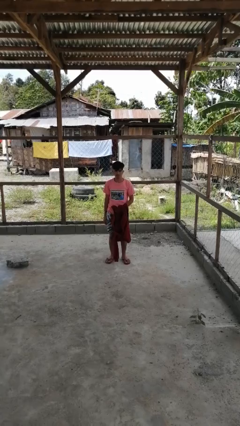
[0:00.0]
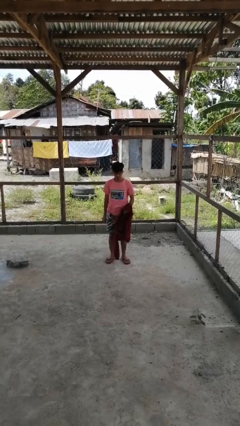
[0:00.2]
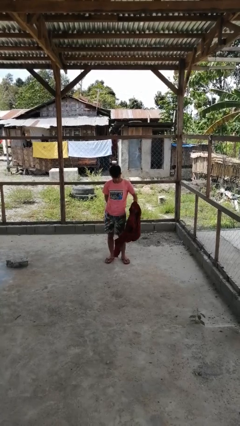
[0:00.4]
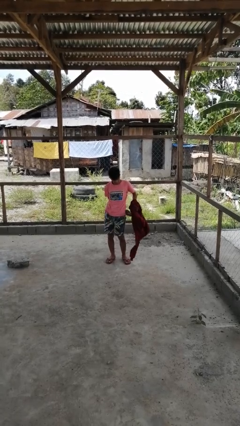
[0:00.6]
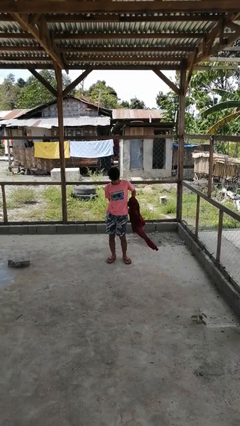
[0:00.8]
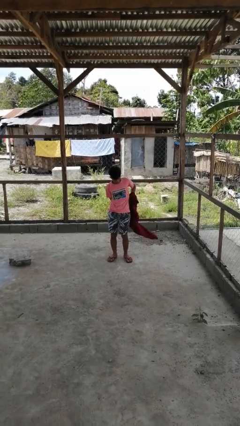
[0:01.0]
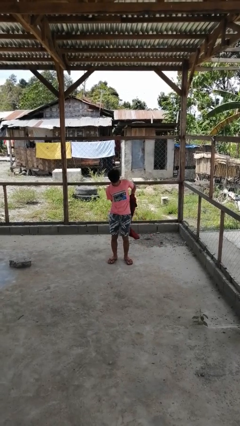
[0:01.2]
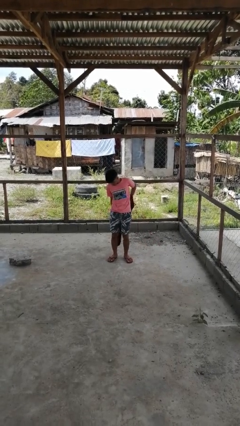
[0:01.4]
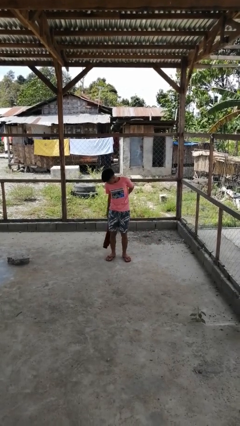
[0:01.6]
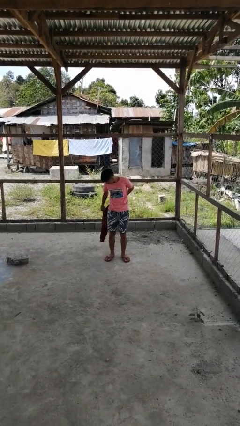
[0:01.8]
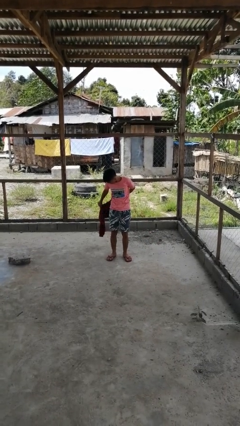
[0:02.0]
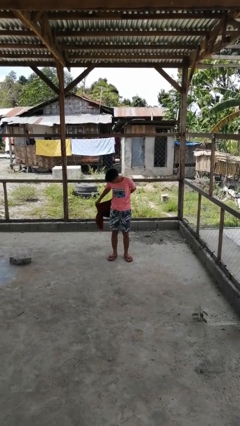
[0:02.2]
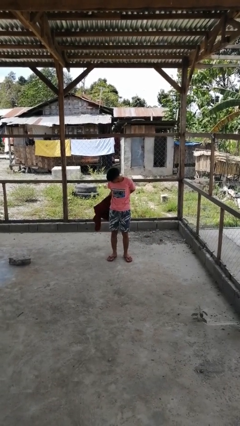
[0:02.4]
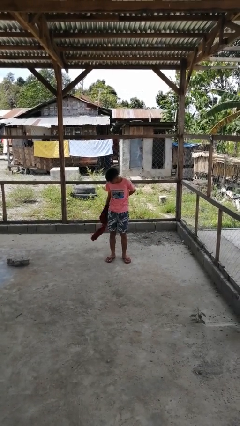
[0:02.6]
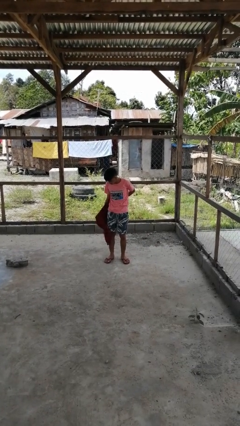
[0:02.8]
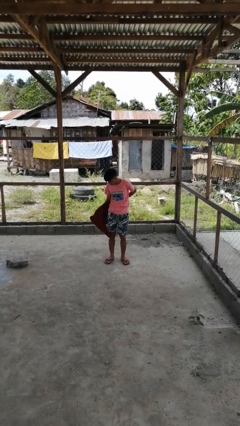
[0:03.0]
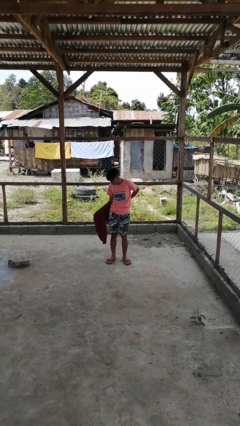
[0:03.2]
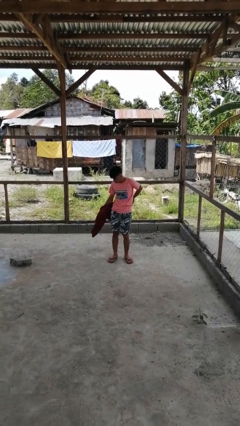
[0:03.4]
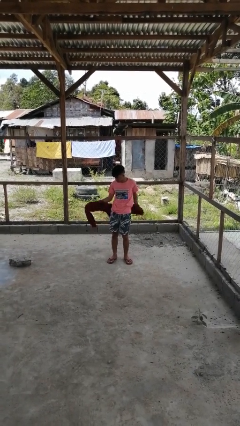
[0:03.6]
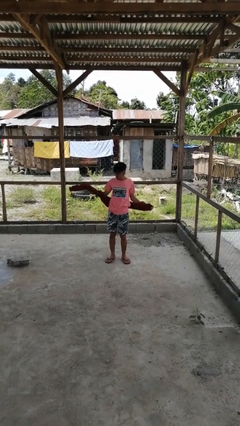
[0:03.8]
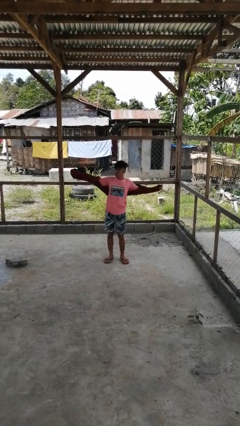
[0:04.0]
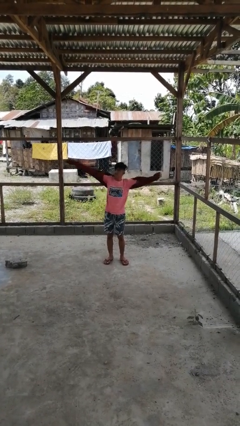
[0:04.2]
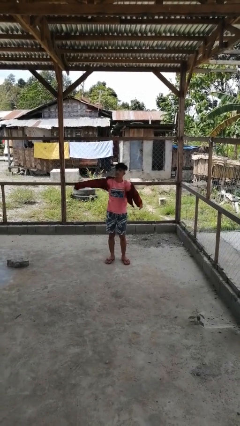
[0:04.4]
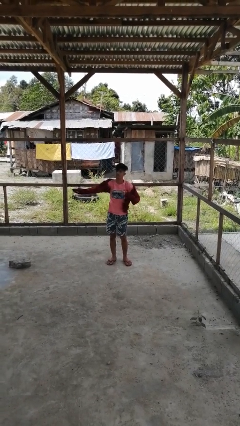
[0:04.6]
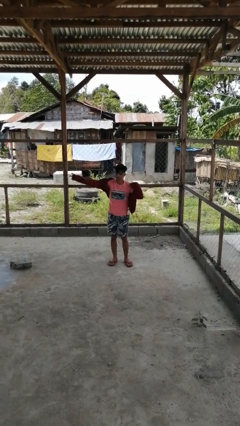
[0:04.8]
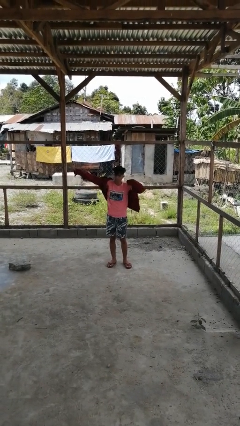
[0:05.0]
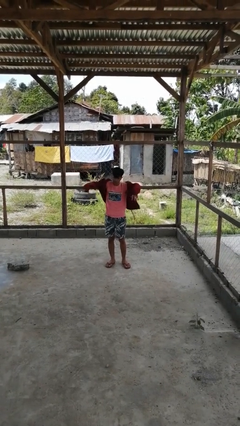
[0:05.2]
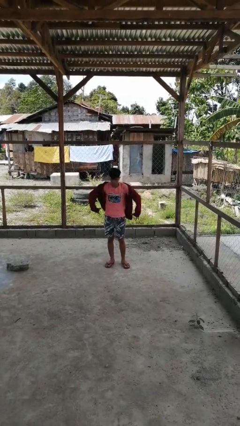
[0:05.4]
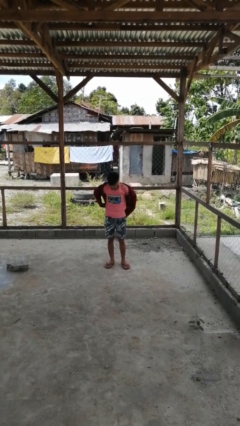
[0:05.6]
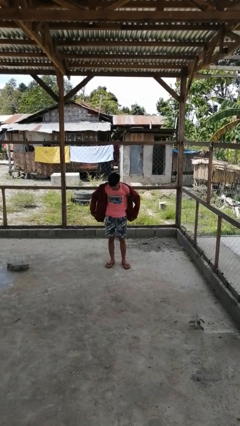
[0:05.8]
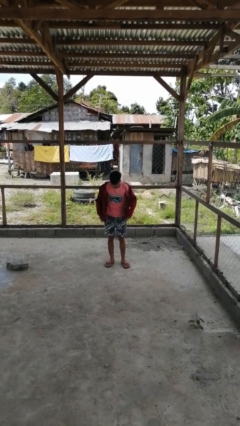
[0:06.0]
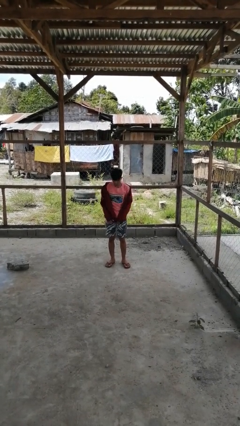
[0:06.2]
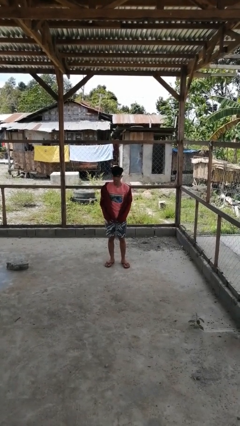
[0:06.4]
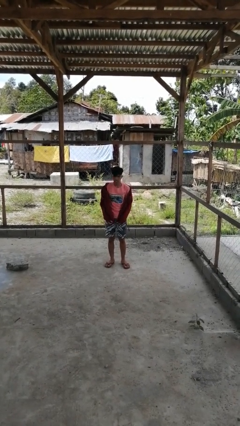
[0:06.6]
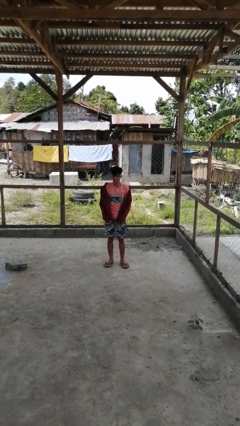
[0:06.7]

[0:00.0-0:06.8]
person puts on jacket

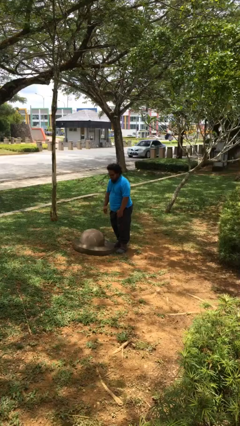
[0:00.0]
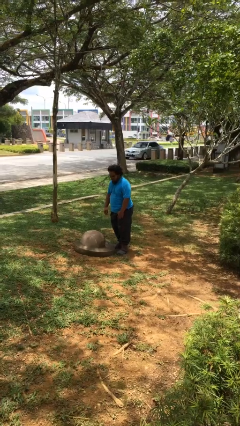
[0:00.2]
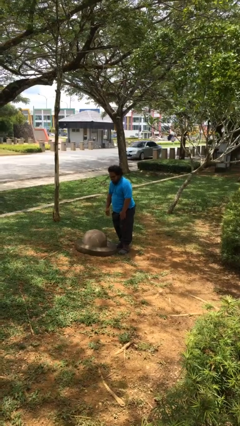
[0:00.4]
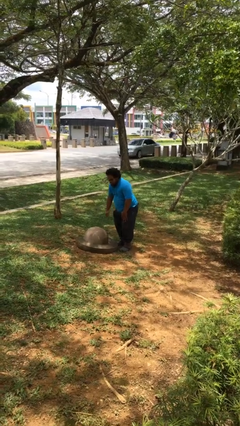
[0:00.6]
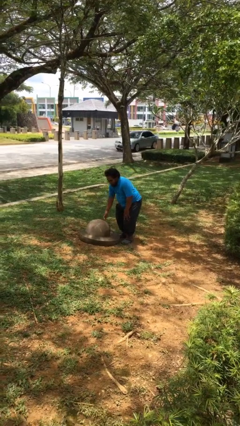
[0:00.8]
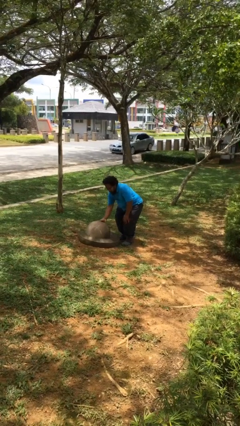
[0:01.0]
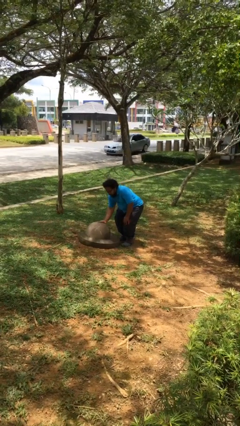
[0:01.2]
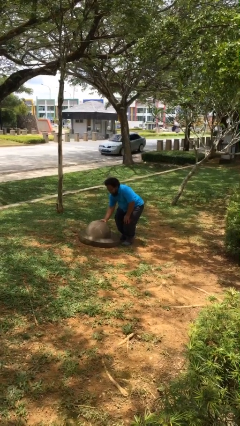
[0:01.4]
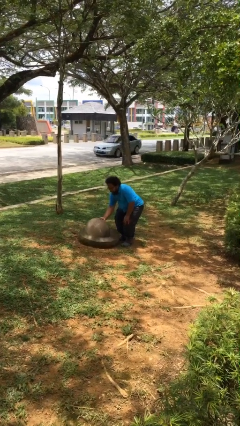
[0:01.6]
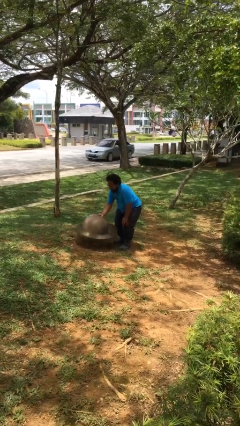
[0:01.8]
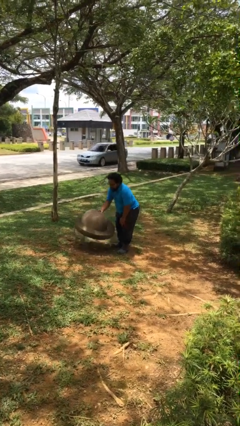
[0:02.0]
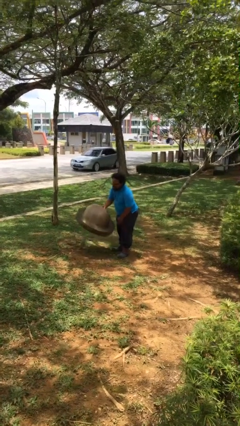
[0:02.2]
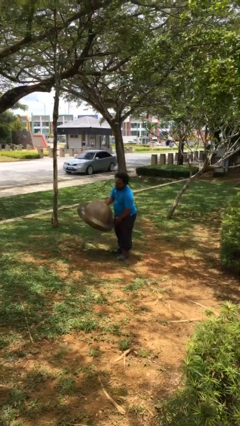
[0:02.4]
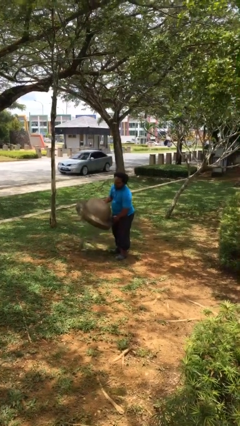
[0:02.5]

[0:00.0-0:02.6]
person picks up object from floor

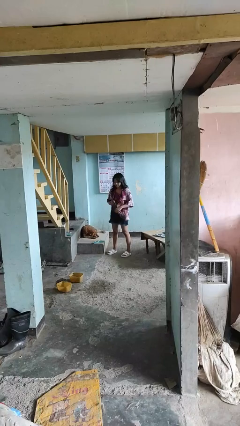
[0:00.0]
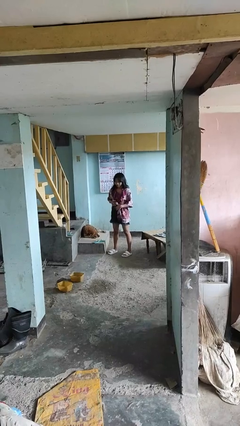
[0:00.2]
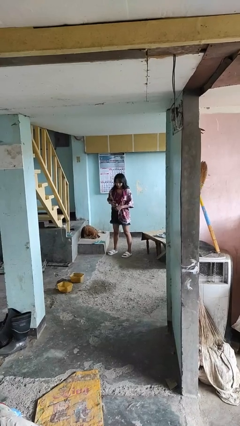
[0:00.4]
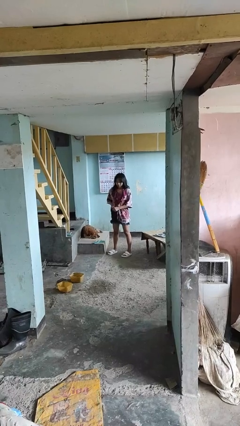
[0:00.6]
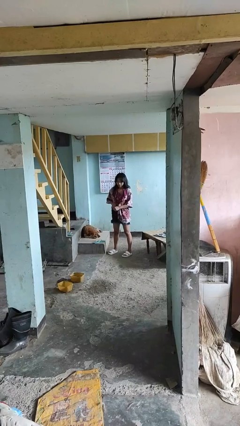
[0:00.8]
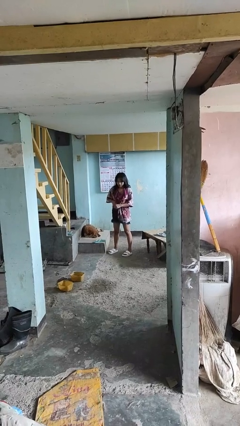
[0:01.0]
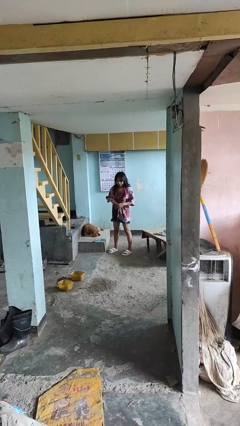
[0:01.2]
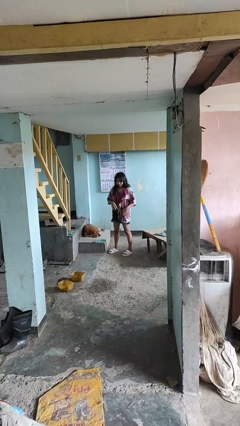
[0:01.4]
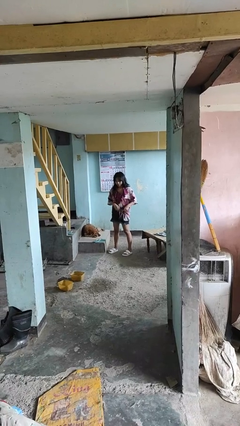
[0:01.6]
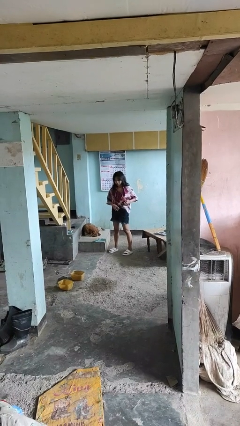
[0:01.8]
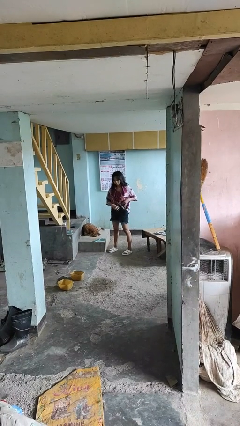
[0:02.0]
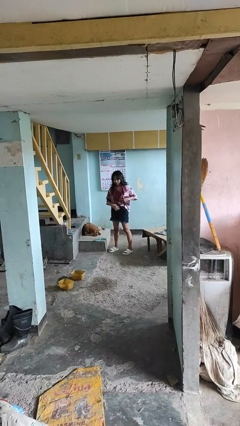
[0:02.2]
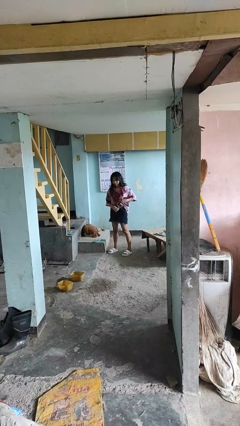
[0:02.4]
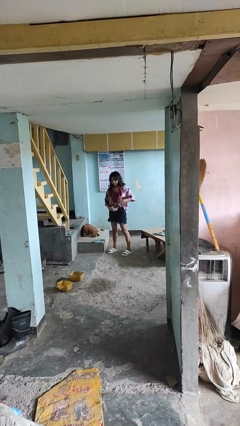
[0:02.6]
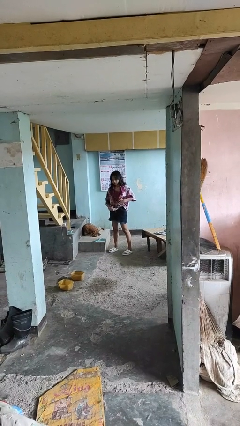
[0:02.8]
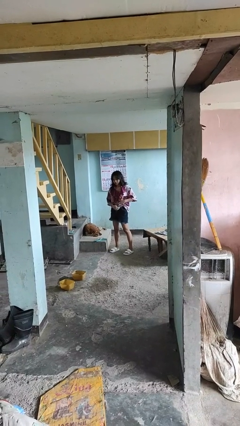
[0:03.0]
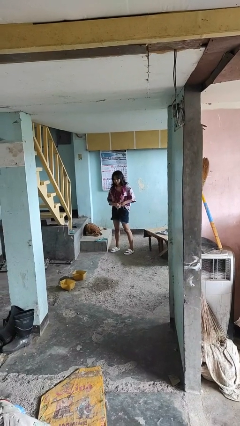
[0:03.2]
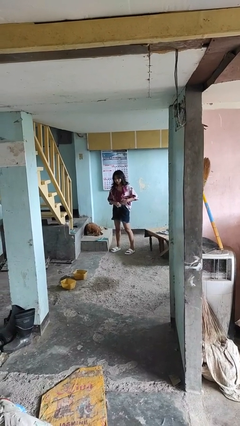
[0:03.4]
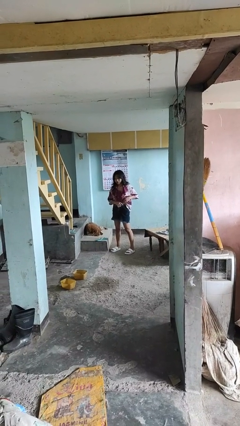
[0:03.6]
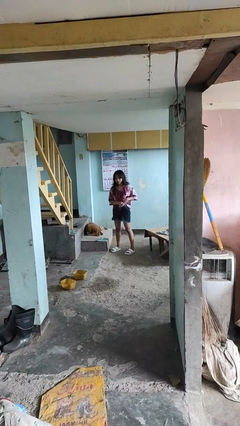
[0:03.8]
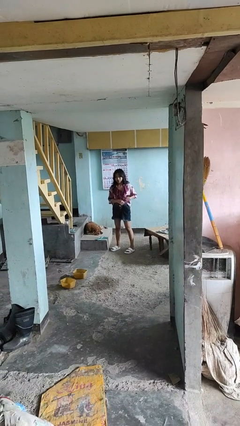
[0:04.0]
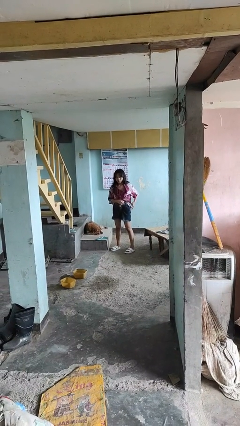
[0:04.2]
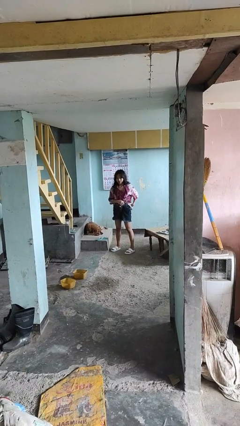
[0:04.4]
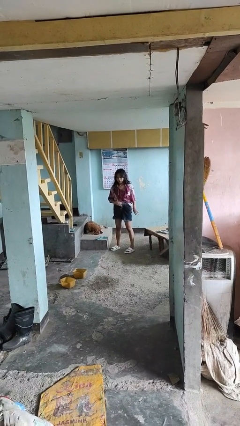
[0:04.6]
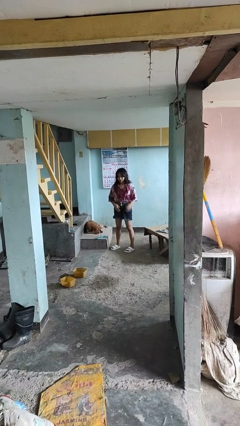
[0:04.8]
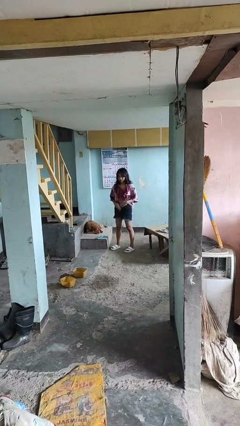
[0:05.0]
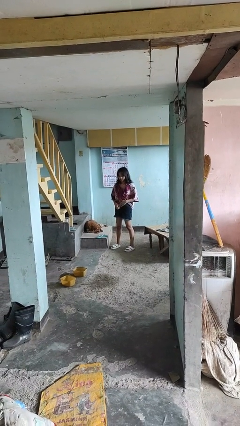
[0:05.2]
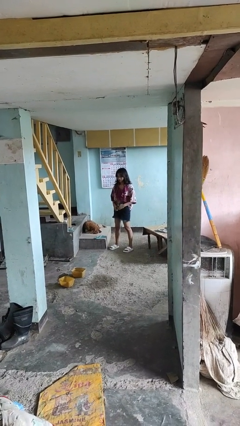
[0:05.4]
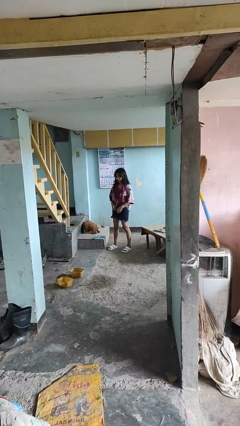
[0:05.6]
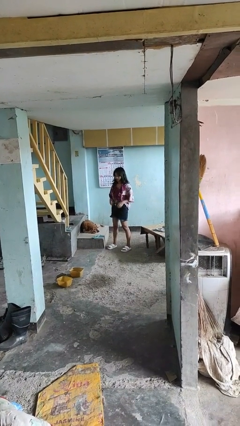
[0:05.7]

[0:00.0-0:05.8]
person tucks in shirt

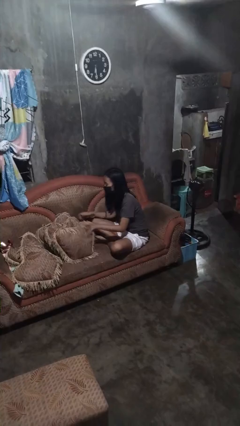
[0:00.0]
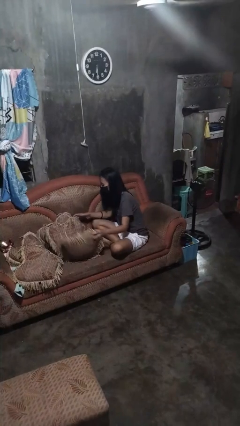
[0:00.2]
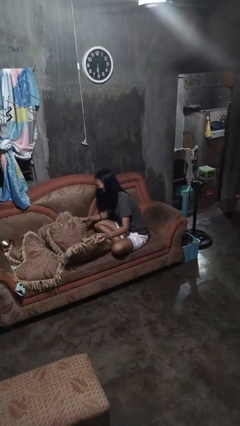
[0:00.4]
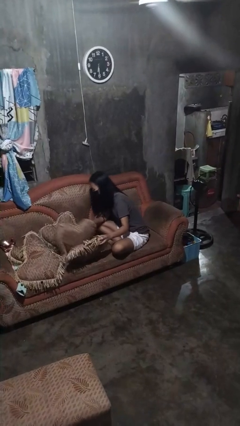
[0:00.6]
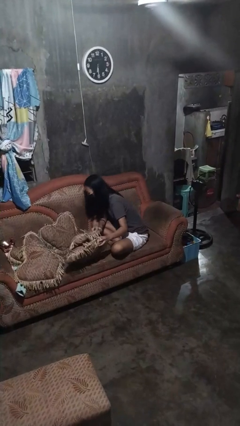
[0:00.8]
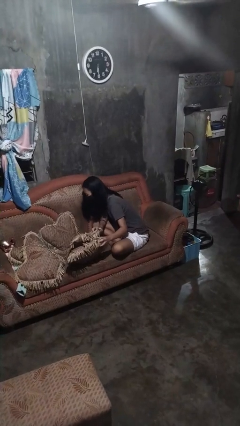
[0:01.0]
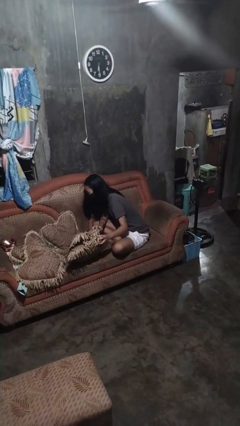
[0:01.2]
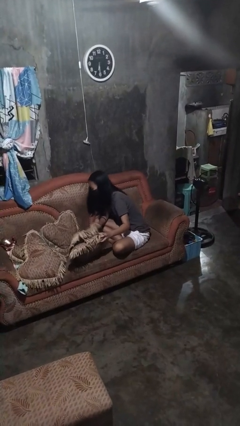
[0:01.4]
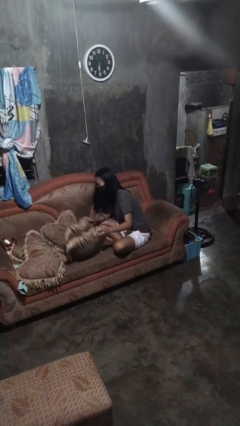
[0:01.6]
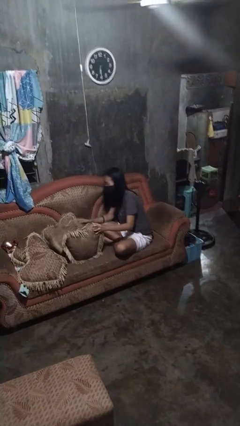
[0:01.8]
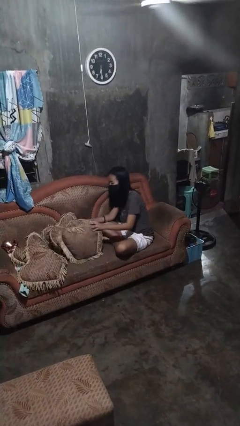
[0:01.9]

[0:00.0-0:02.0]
person searches in couch

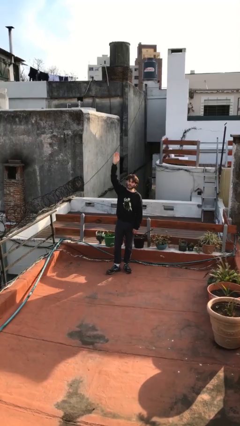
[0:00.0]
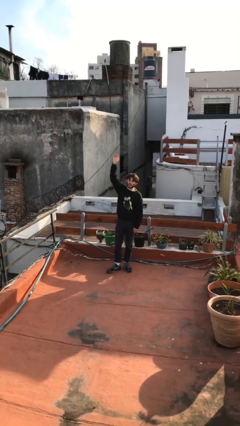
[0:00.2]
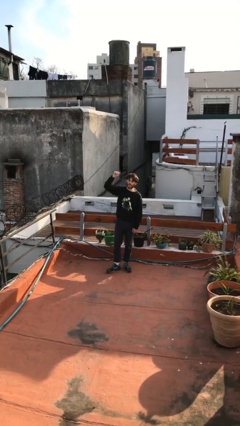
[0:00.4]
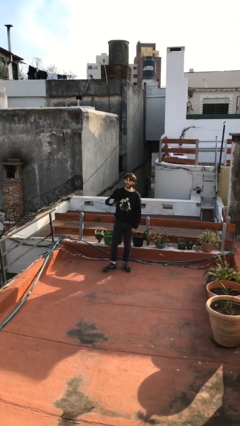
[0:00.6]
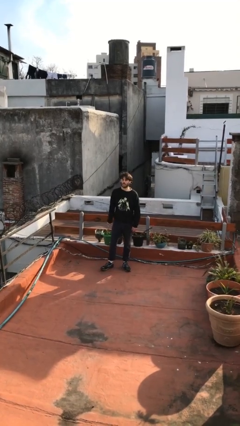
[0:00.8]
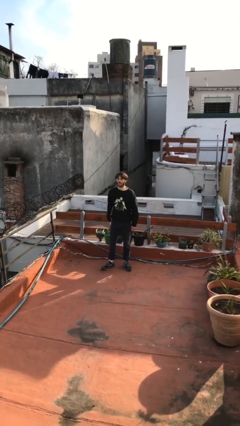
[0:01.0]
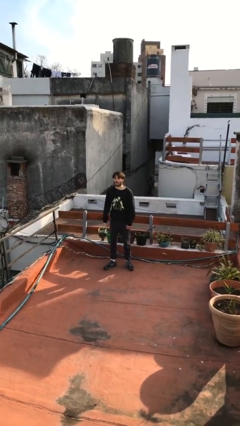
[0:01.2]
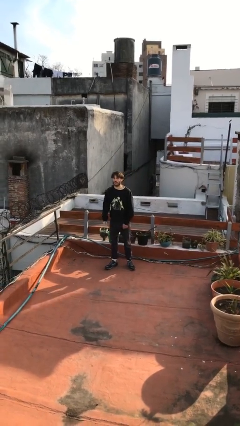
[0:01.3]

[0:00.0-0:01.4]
person gestures lower hand
